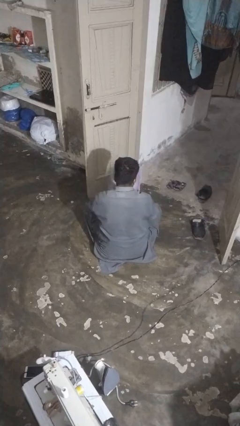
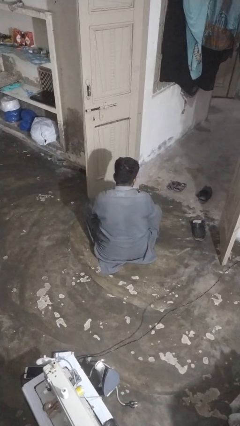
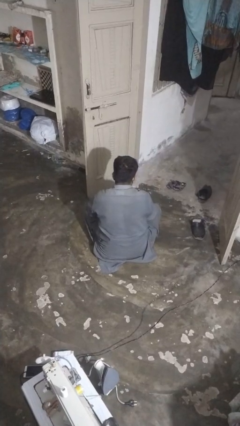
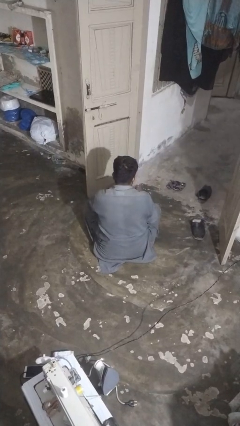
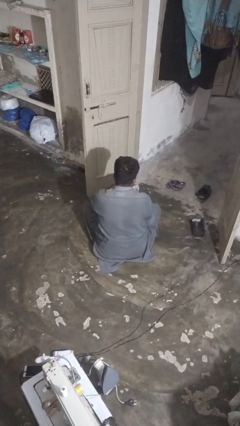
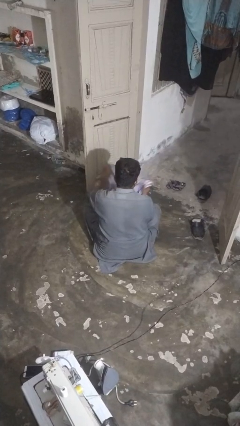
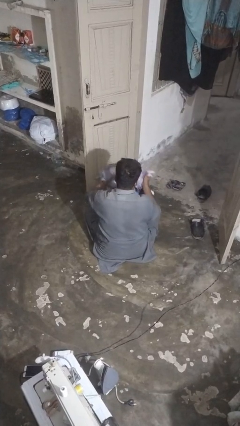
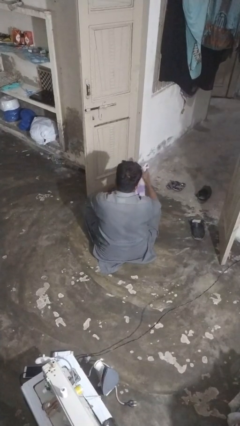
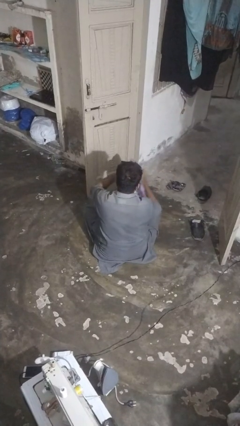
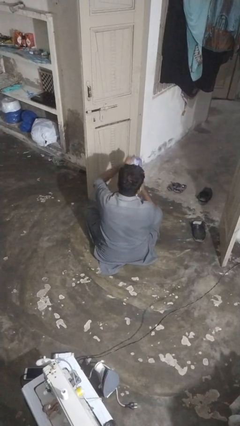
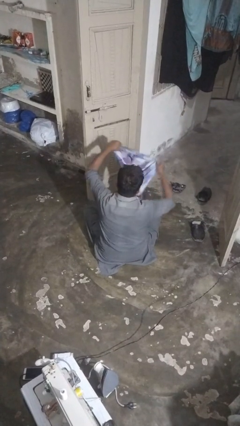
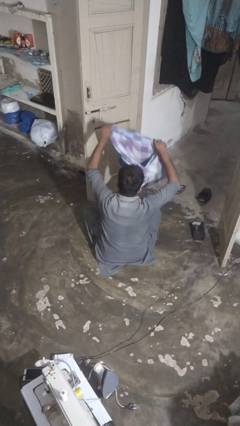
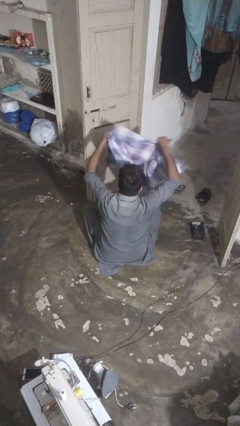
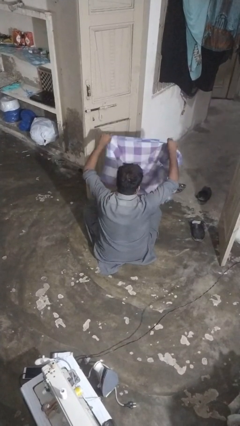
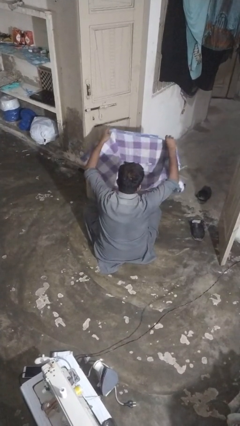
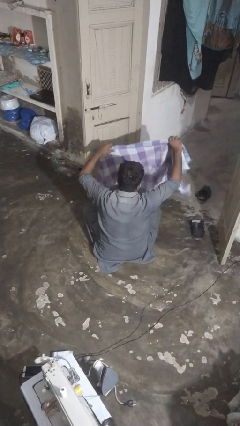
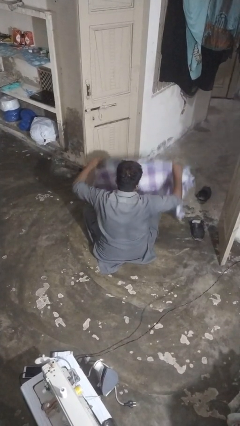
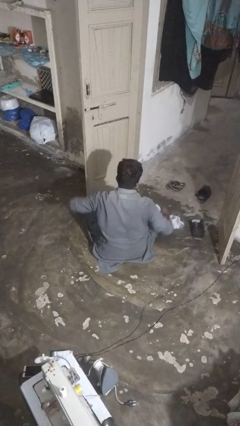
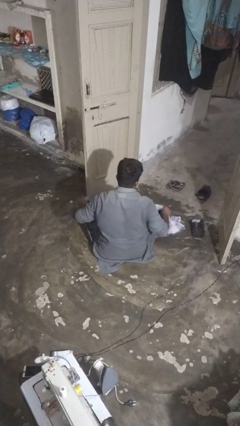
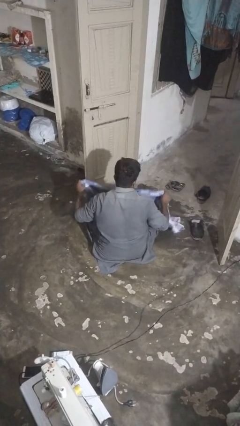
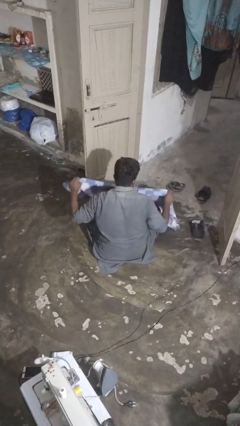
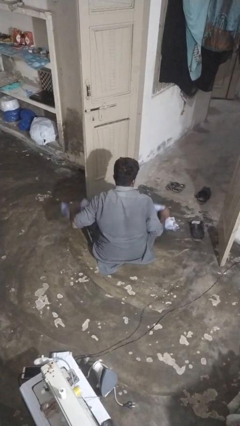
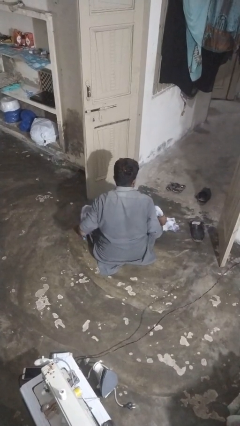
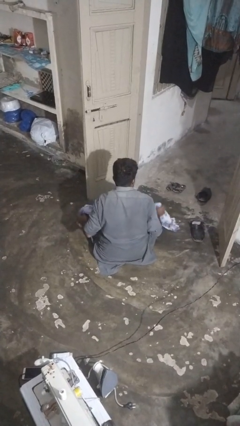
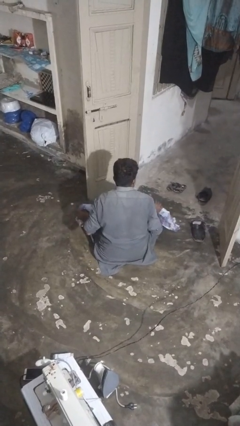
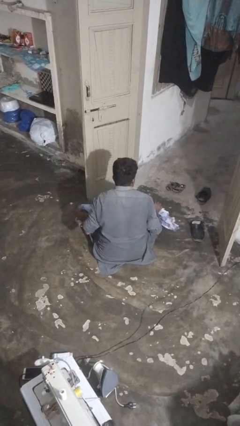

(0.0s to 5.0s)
person unfolds blanket

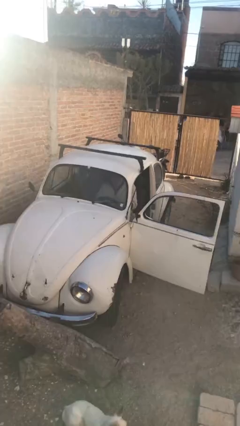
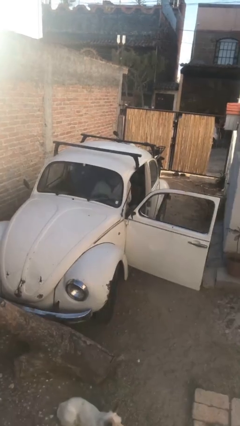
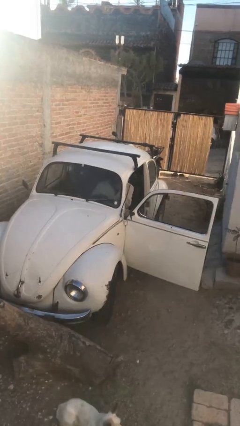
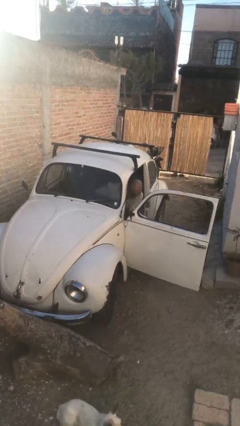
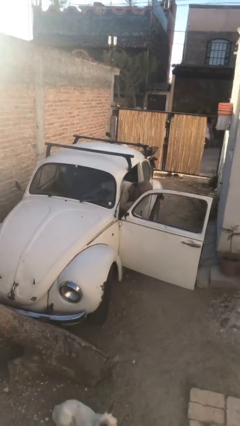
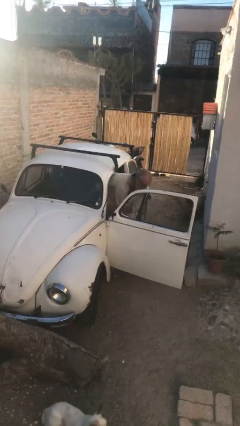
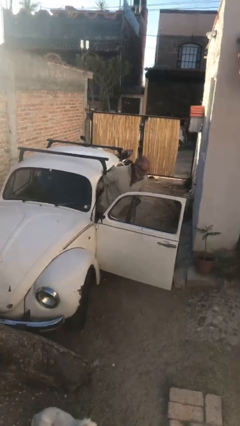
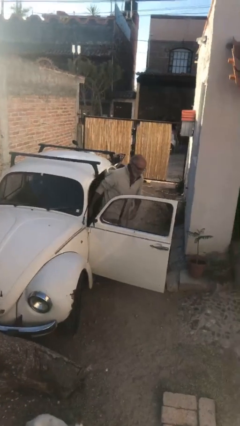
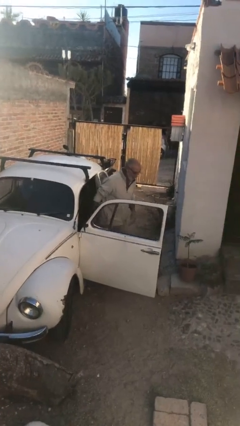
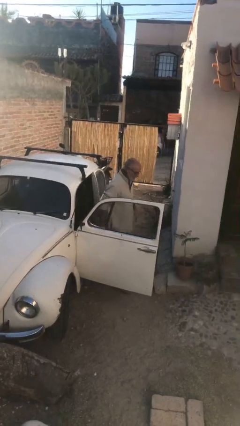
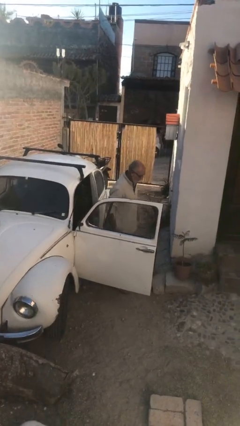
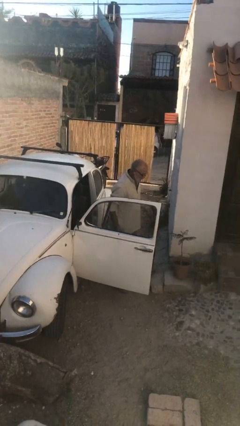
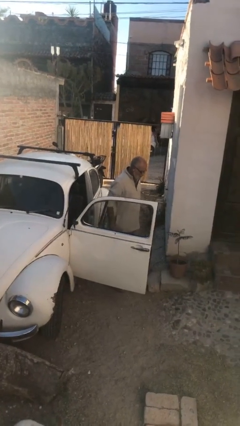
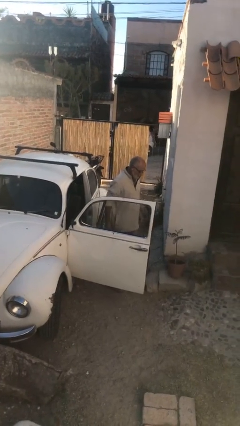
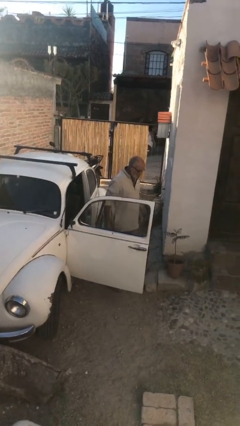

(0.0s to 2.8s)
person exits car

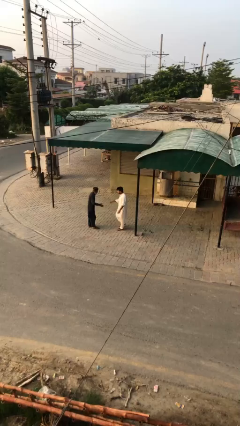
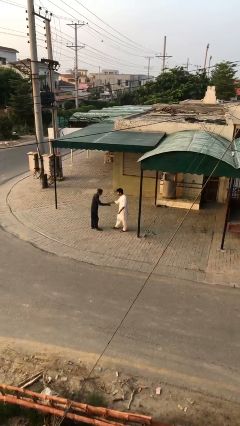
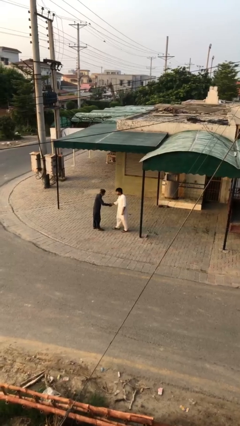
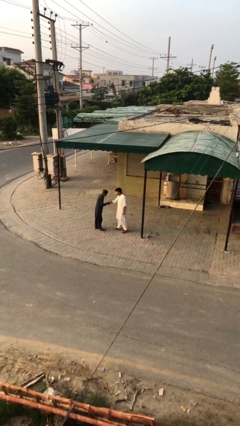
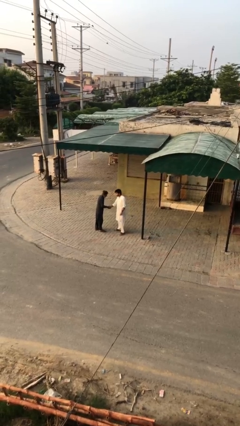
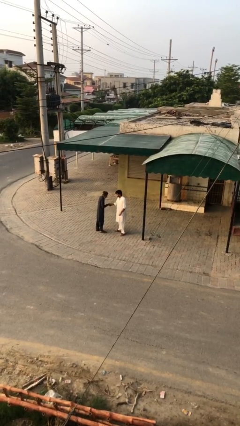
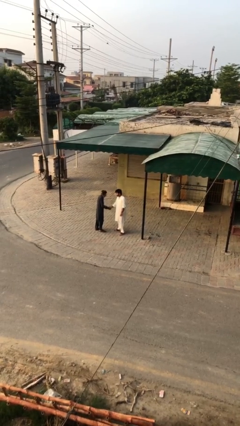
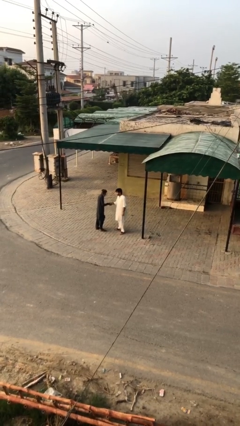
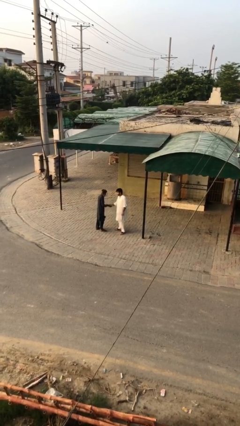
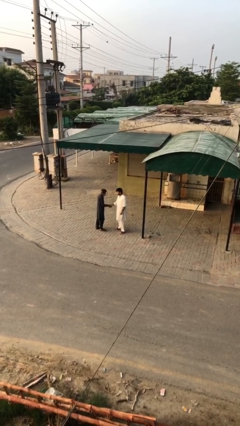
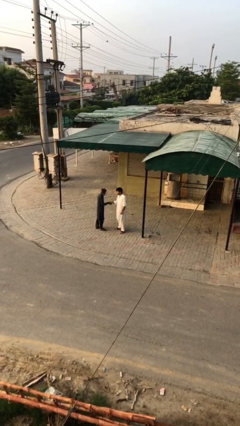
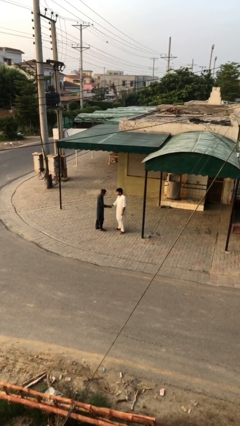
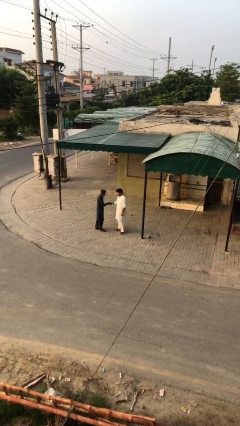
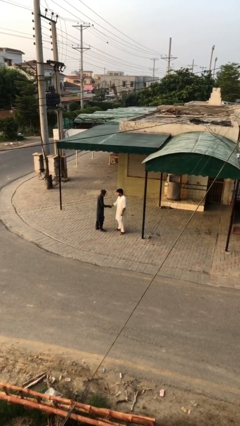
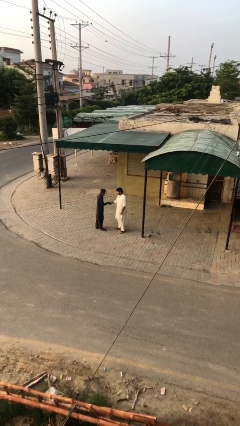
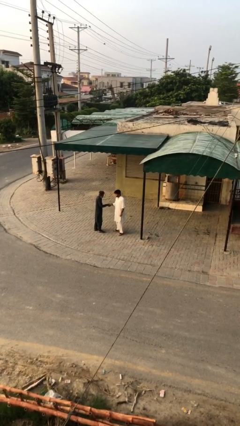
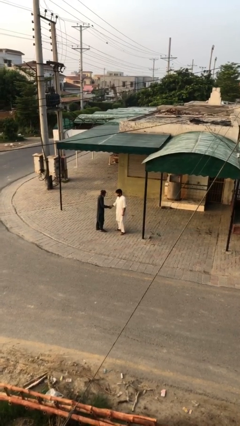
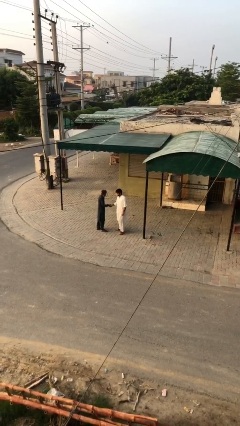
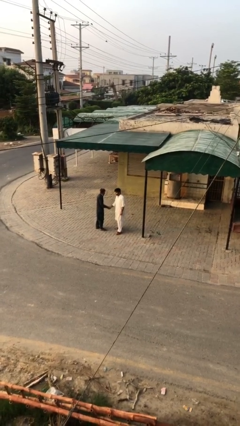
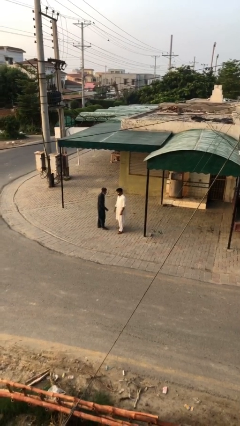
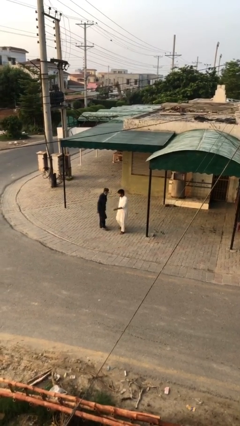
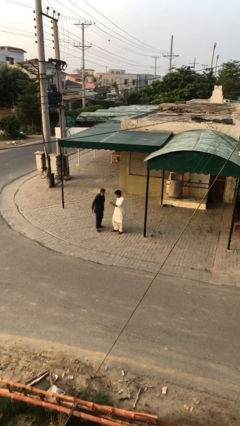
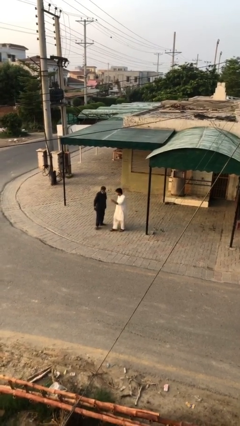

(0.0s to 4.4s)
person shakes hand

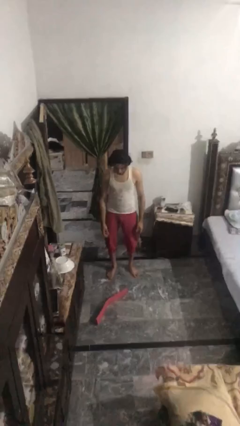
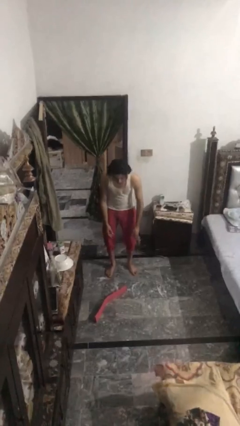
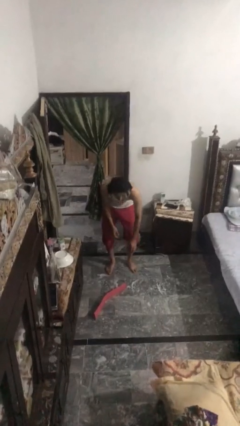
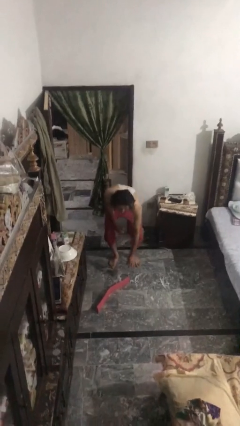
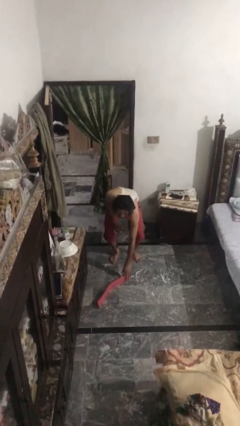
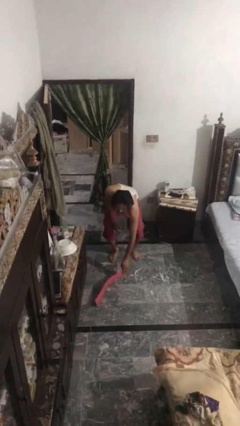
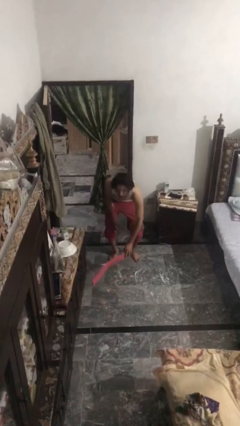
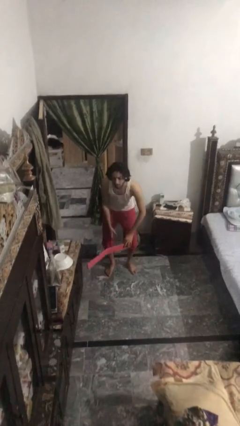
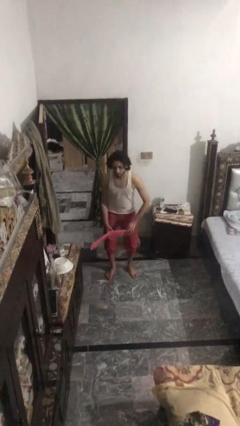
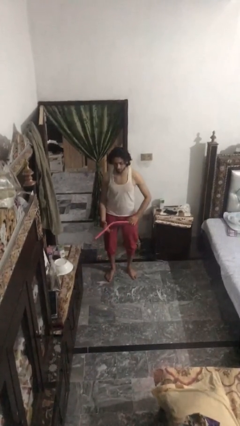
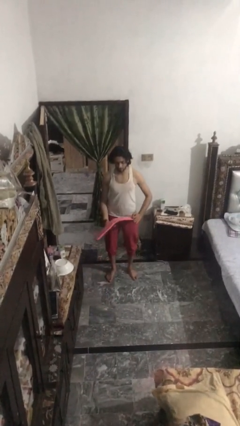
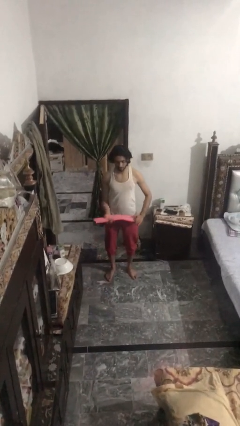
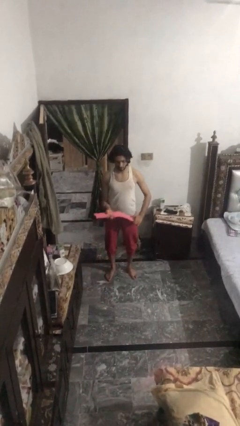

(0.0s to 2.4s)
person picks up object from floor

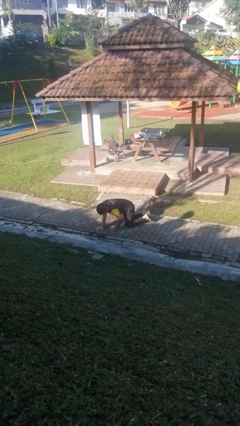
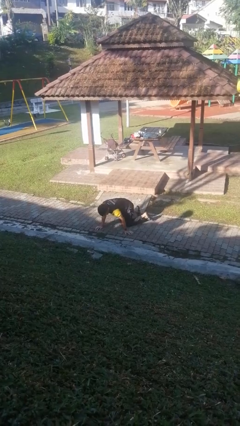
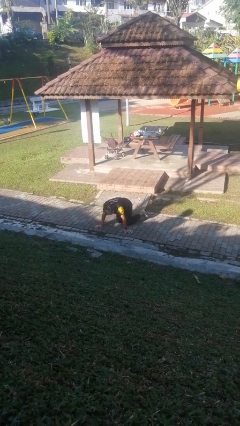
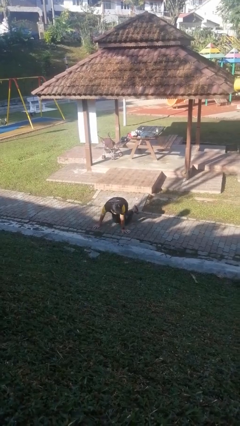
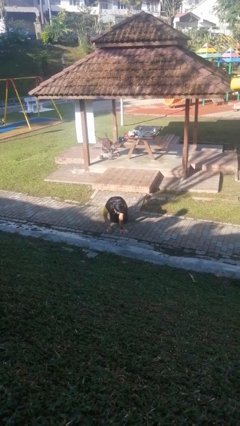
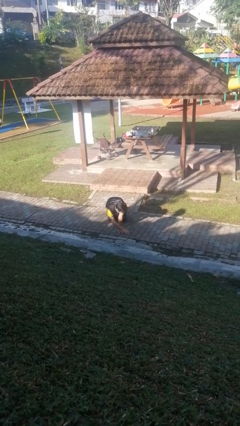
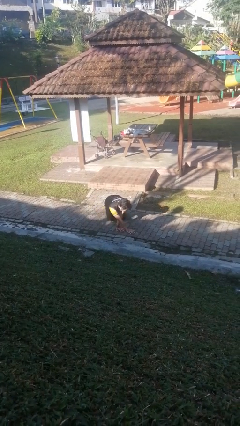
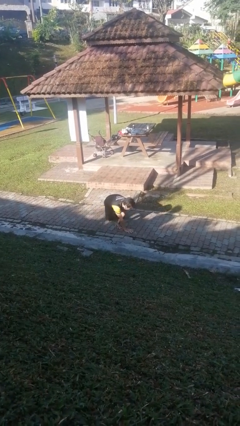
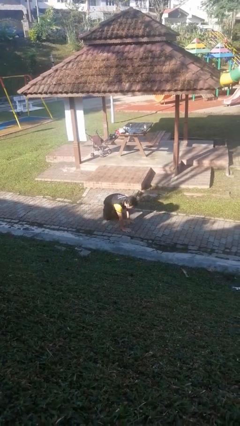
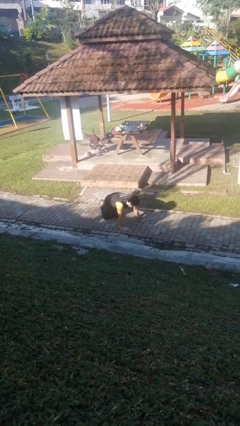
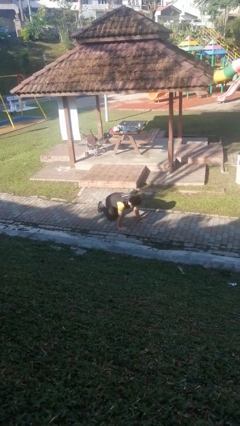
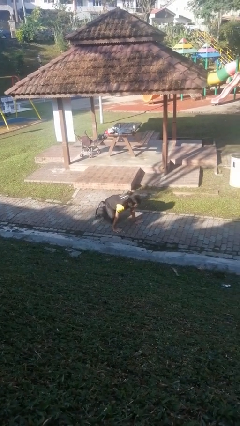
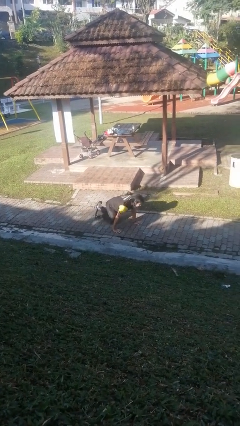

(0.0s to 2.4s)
person crawls

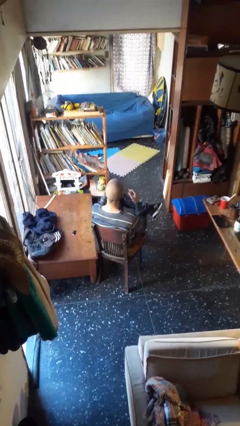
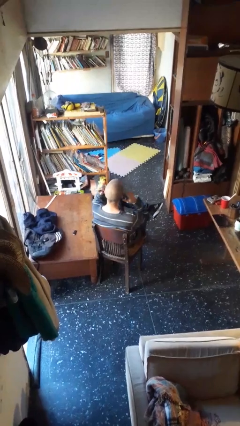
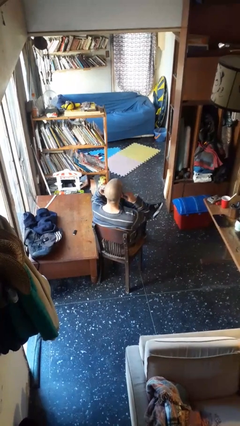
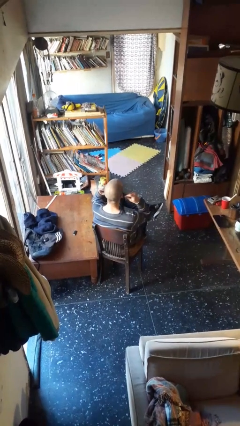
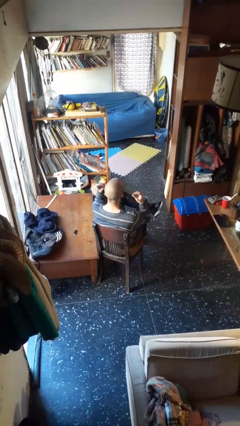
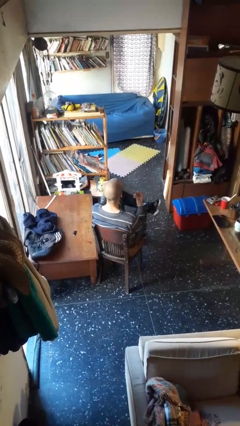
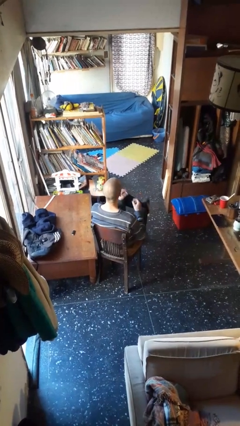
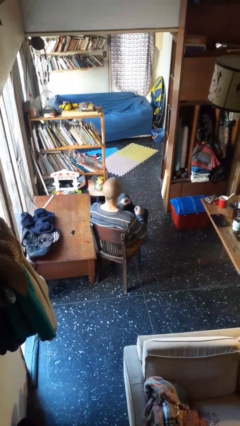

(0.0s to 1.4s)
person takes off headphones
